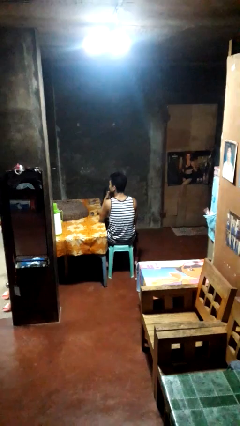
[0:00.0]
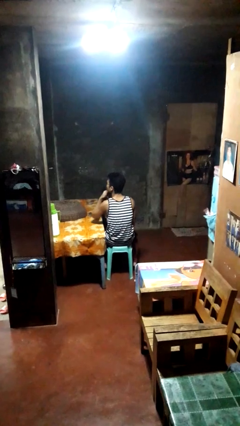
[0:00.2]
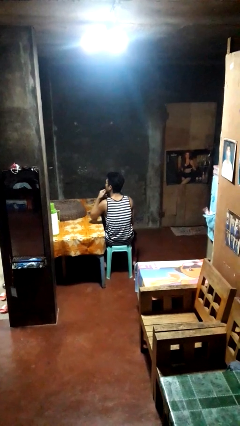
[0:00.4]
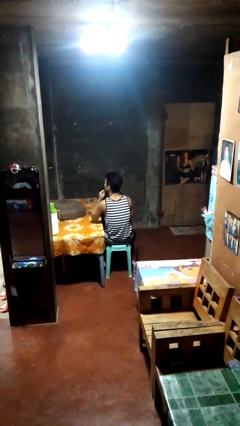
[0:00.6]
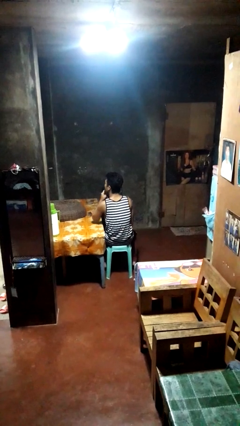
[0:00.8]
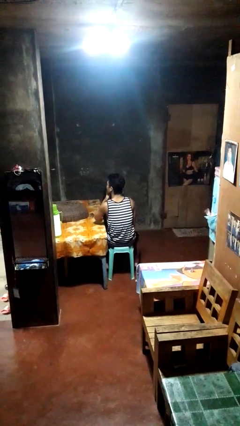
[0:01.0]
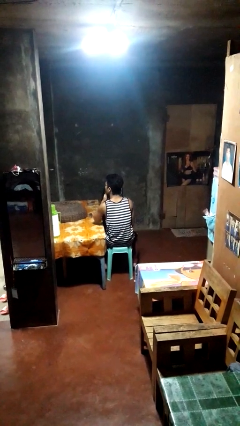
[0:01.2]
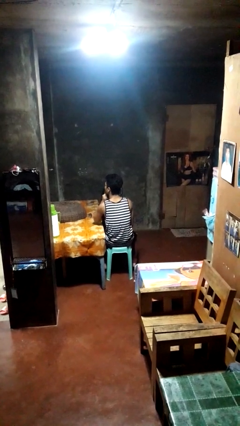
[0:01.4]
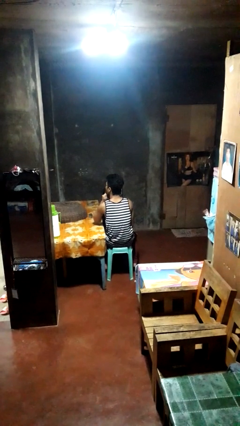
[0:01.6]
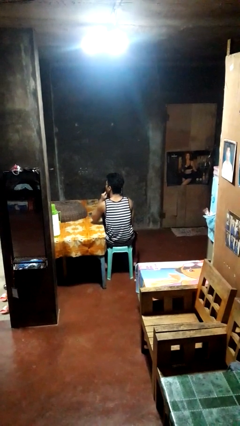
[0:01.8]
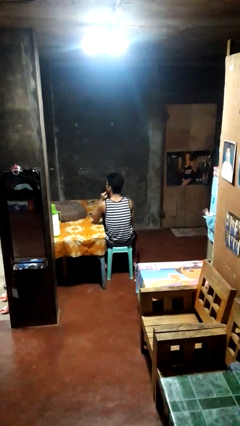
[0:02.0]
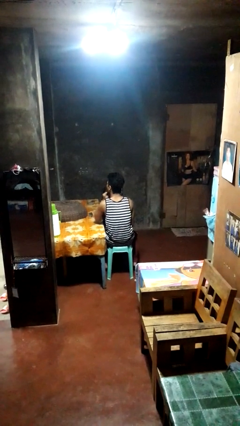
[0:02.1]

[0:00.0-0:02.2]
person strokes chin

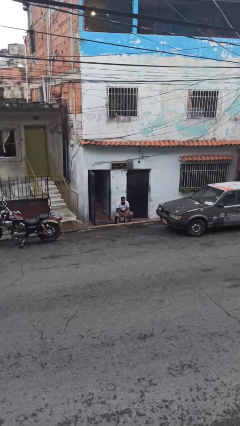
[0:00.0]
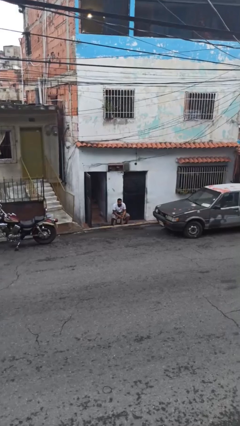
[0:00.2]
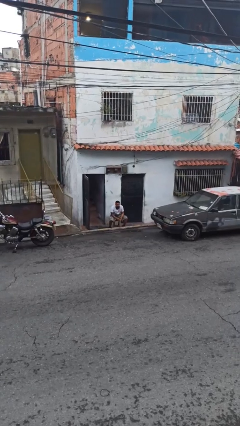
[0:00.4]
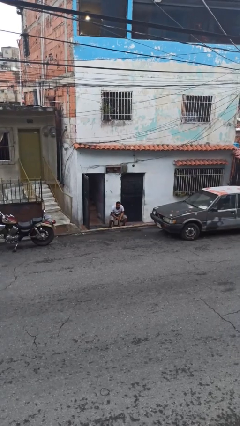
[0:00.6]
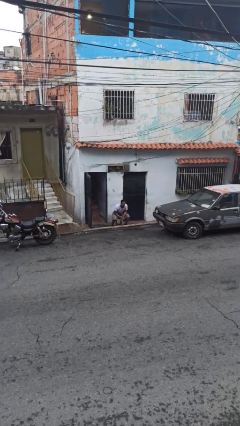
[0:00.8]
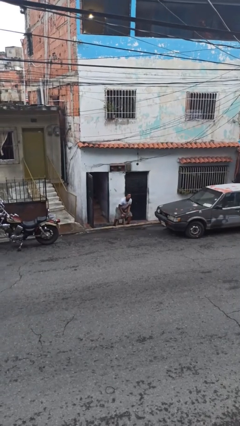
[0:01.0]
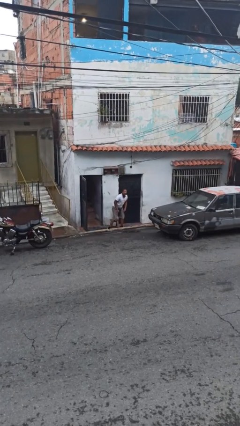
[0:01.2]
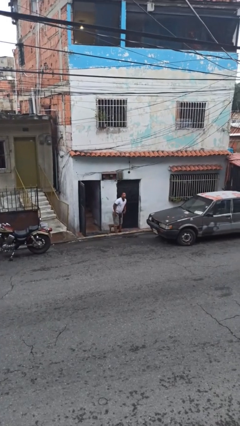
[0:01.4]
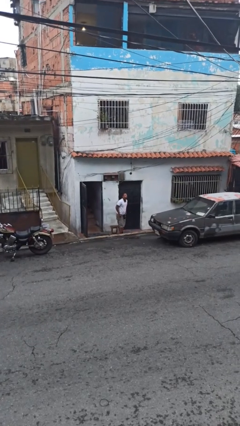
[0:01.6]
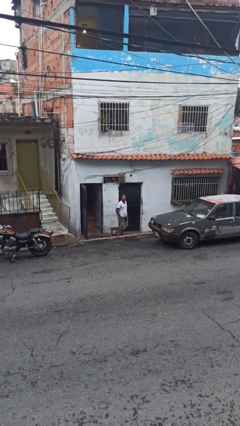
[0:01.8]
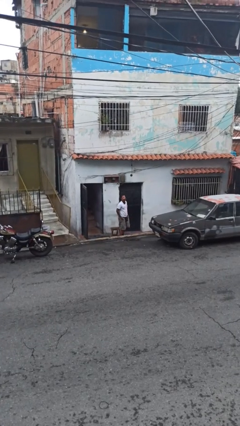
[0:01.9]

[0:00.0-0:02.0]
person stands up

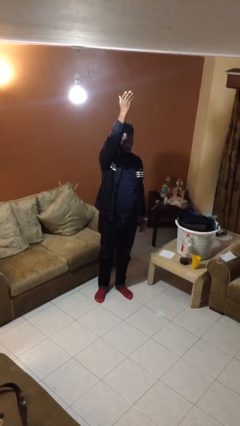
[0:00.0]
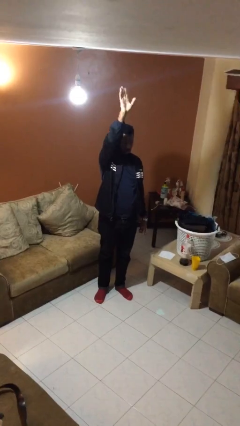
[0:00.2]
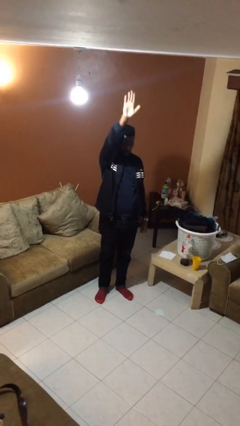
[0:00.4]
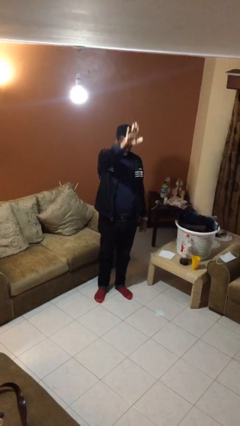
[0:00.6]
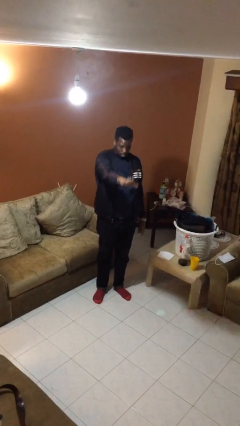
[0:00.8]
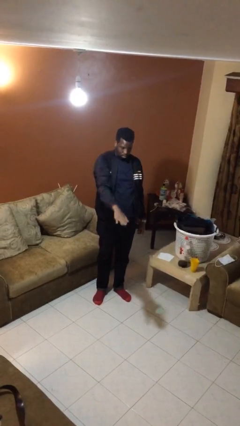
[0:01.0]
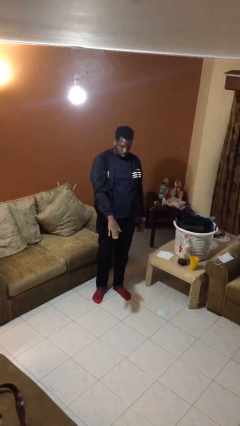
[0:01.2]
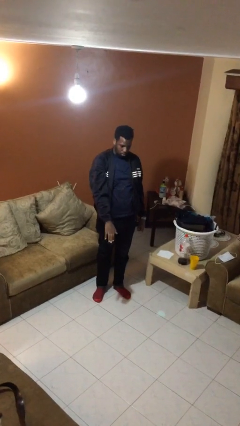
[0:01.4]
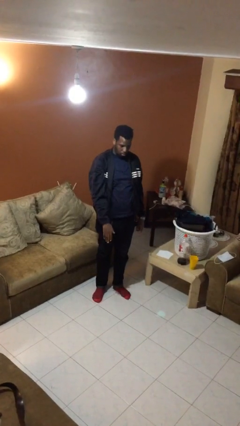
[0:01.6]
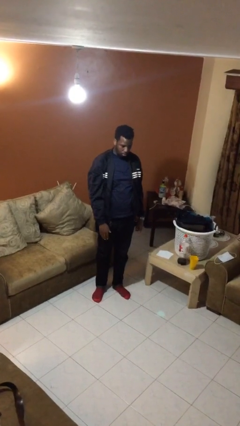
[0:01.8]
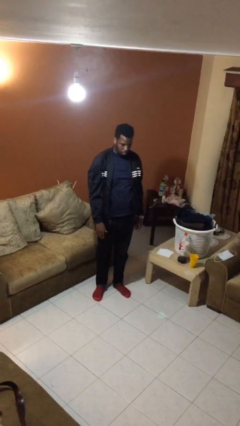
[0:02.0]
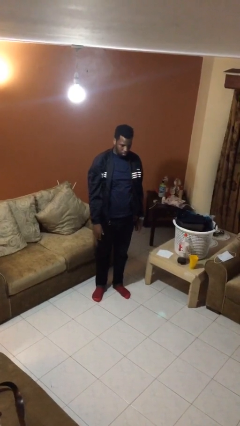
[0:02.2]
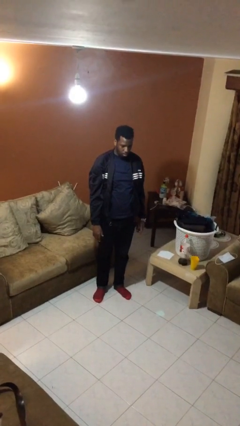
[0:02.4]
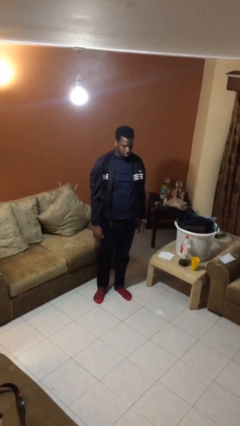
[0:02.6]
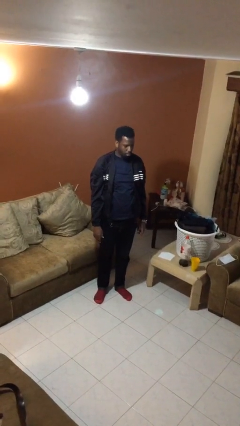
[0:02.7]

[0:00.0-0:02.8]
person gestures swipe down

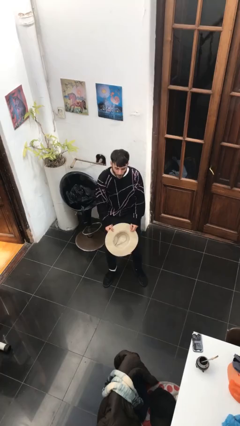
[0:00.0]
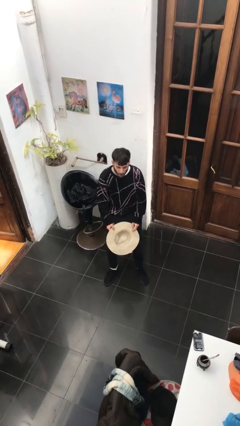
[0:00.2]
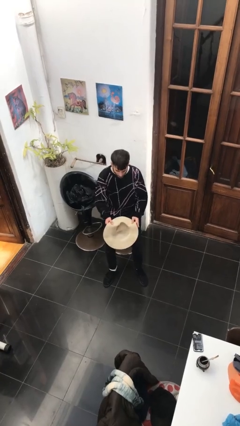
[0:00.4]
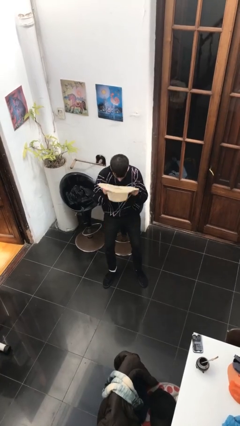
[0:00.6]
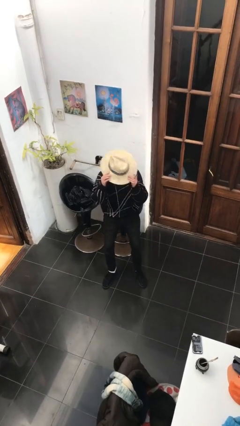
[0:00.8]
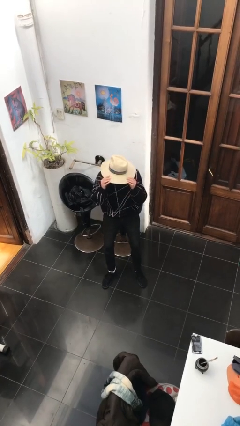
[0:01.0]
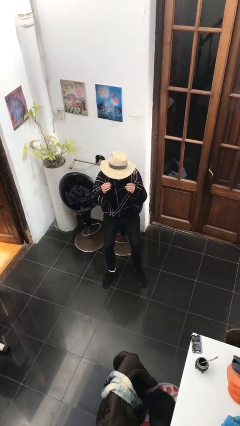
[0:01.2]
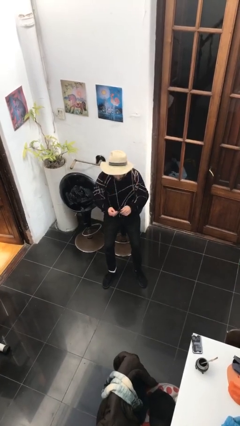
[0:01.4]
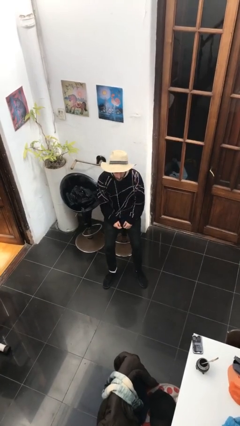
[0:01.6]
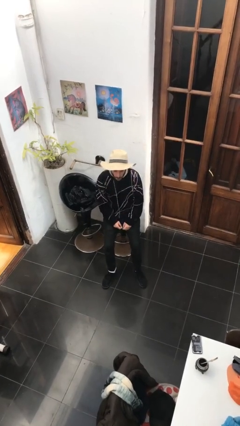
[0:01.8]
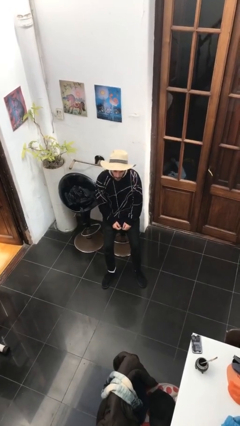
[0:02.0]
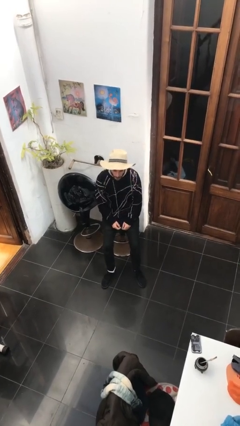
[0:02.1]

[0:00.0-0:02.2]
person puts on hat

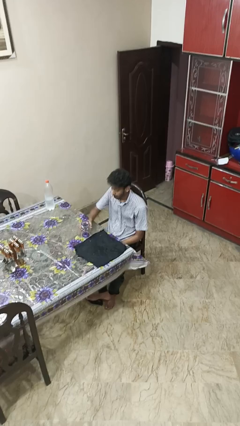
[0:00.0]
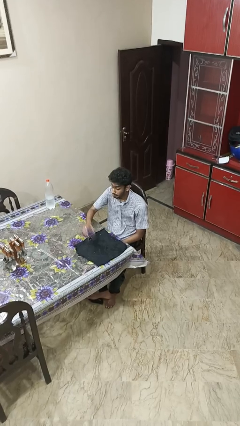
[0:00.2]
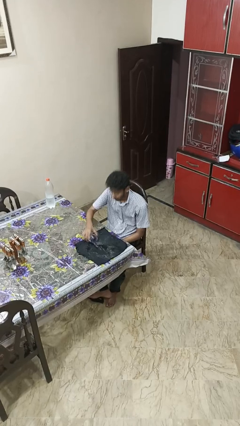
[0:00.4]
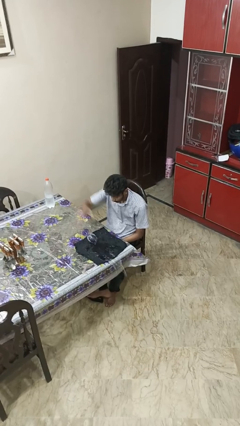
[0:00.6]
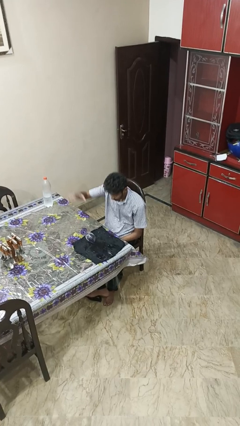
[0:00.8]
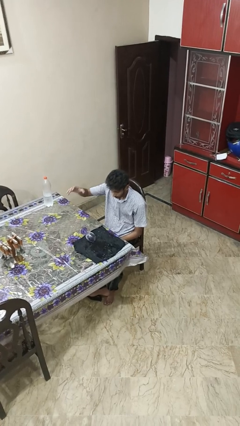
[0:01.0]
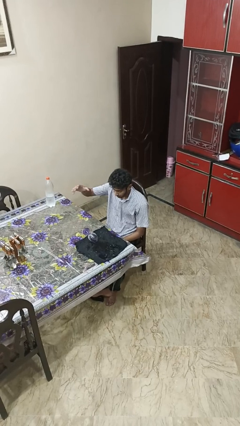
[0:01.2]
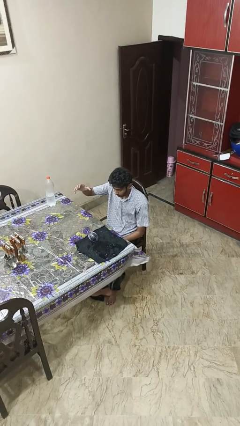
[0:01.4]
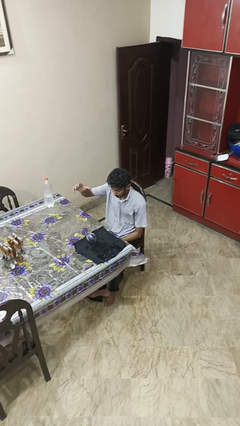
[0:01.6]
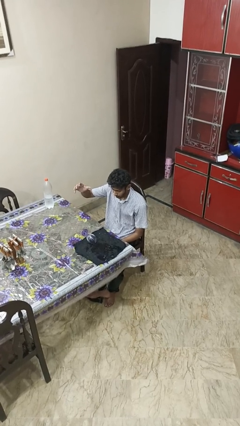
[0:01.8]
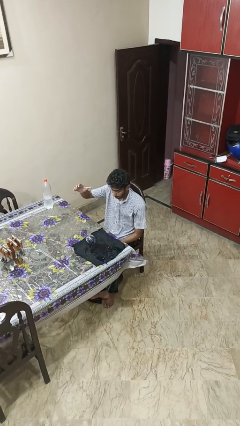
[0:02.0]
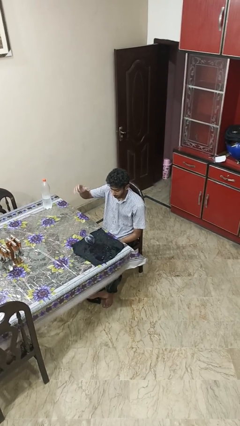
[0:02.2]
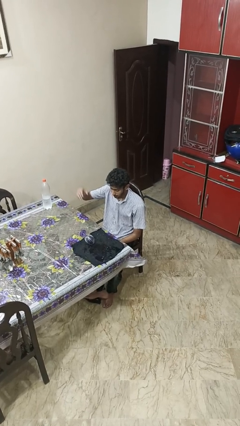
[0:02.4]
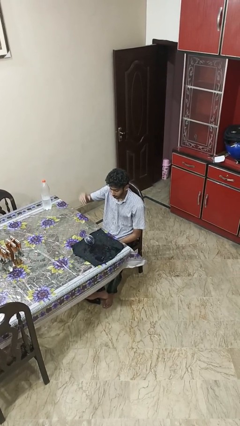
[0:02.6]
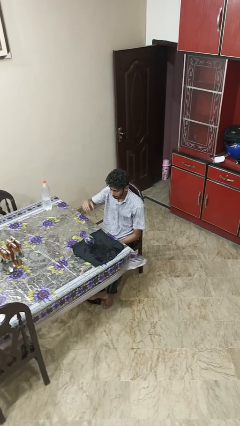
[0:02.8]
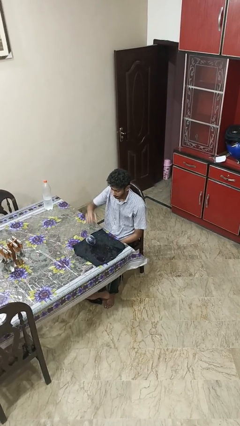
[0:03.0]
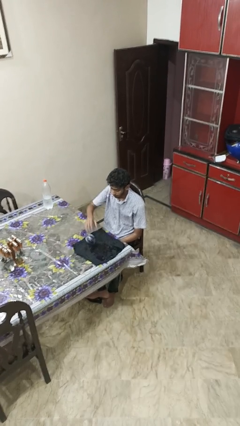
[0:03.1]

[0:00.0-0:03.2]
person spills on table

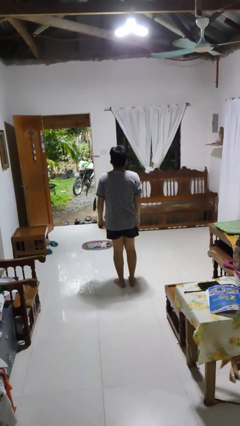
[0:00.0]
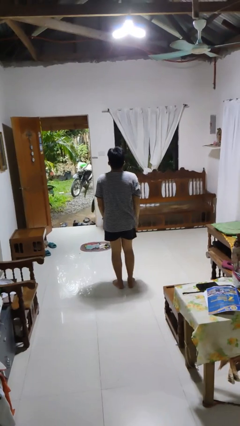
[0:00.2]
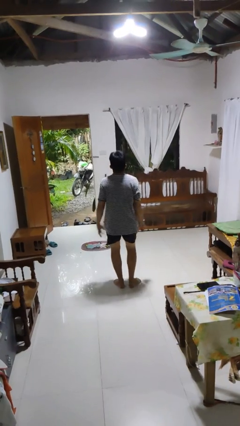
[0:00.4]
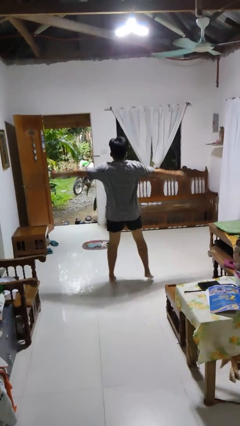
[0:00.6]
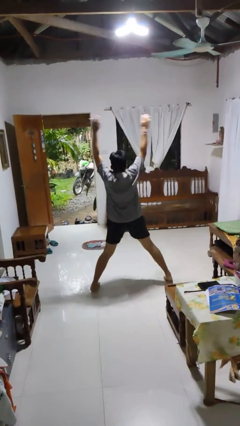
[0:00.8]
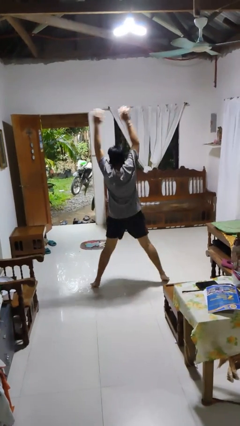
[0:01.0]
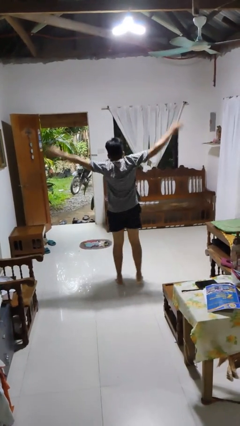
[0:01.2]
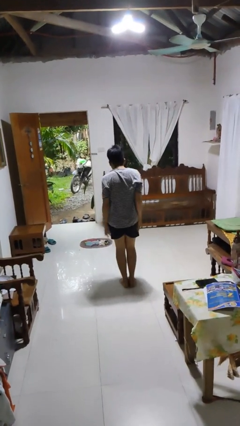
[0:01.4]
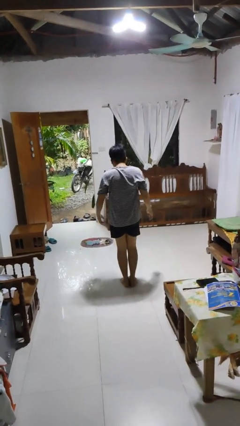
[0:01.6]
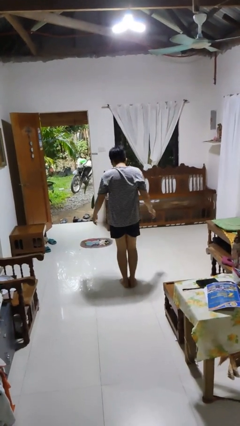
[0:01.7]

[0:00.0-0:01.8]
person exercises with jumping jacks

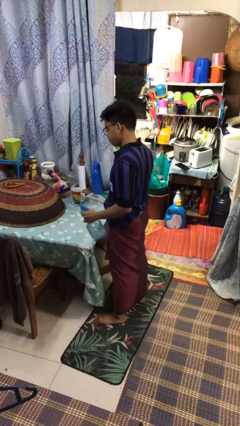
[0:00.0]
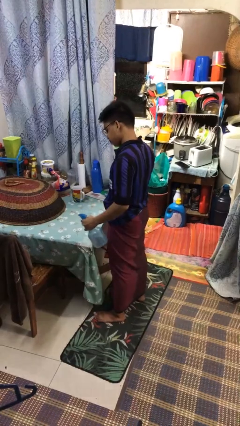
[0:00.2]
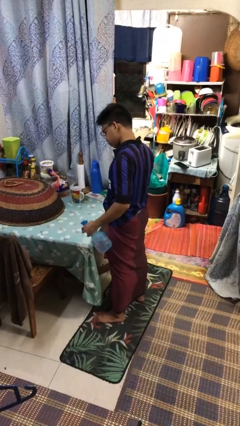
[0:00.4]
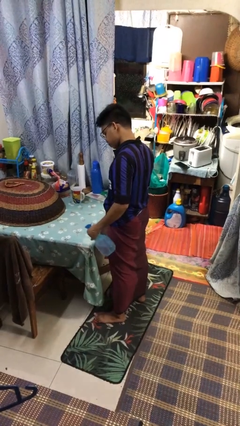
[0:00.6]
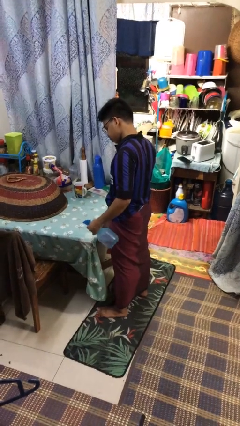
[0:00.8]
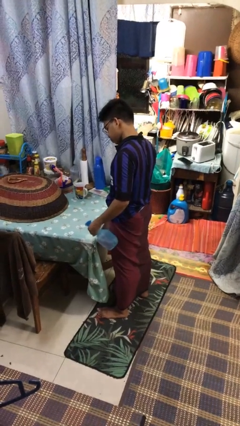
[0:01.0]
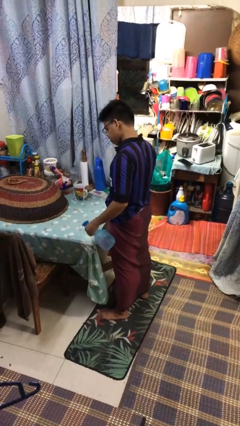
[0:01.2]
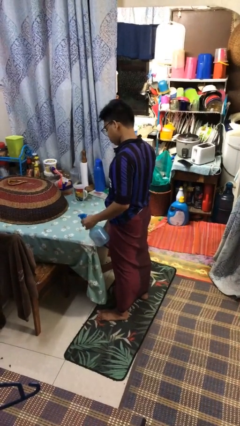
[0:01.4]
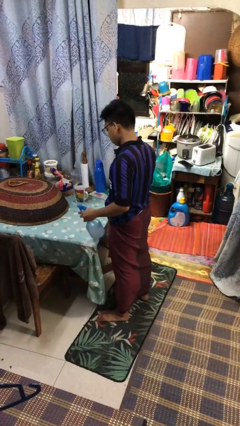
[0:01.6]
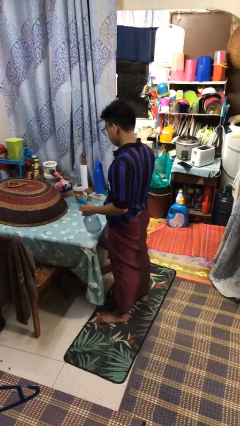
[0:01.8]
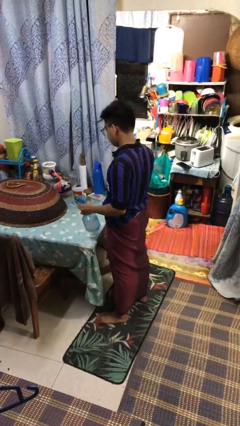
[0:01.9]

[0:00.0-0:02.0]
person sprays from bottle

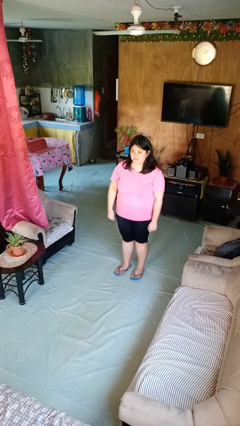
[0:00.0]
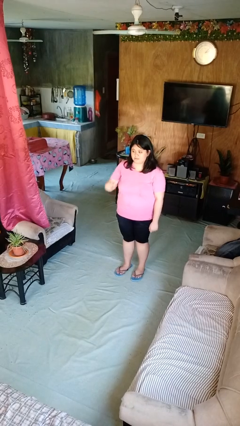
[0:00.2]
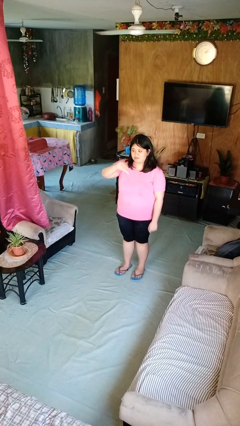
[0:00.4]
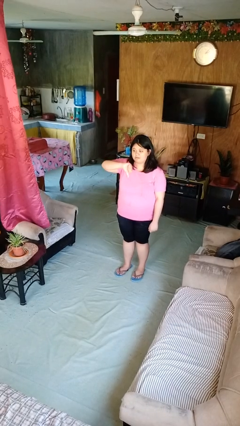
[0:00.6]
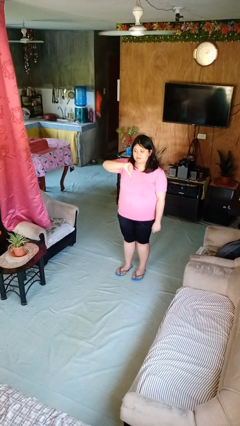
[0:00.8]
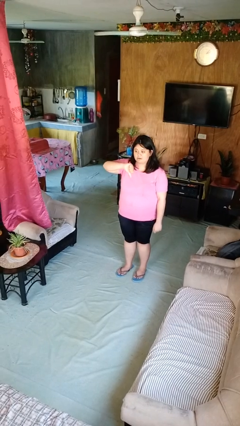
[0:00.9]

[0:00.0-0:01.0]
person gestures thumbs down
